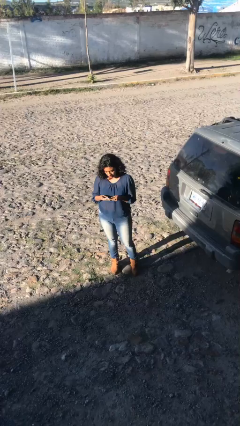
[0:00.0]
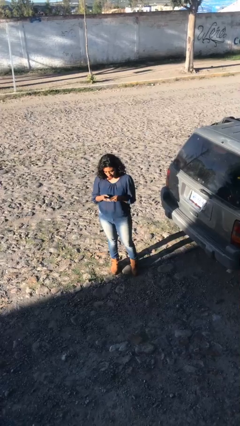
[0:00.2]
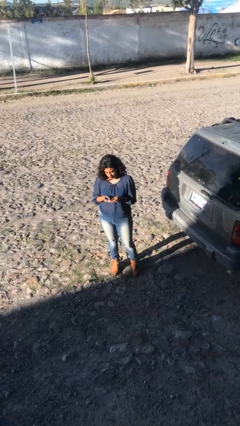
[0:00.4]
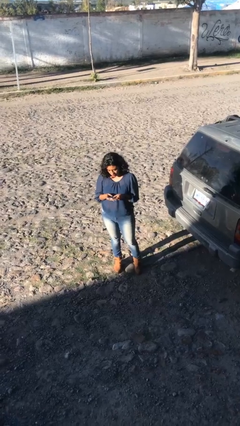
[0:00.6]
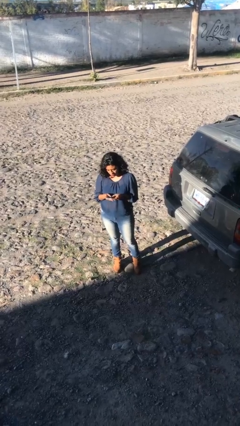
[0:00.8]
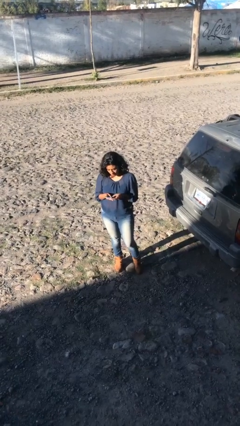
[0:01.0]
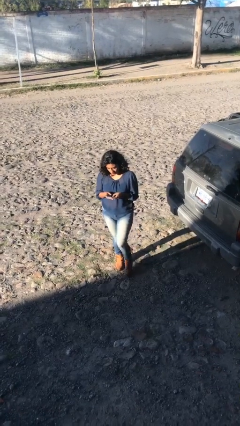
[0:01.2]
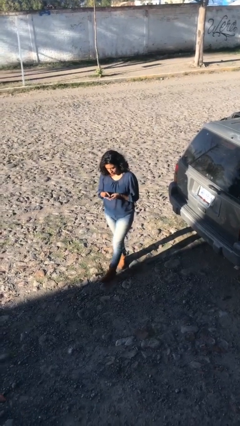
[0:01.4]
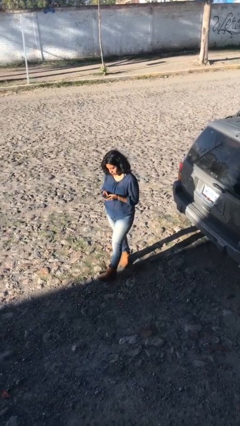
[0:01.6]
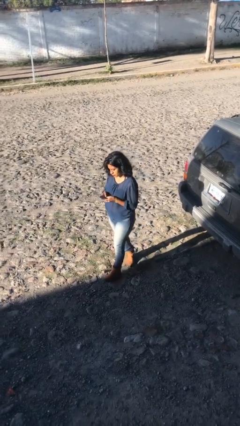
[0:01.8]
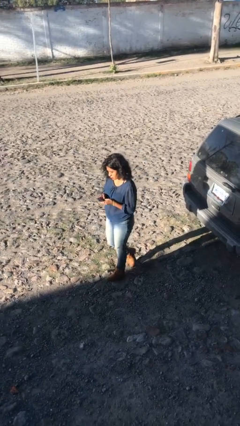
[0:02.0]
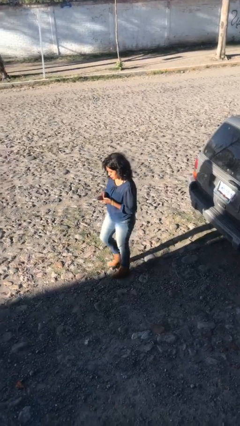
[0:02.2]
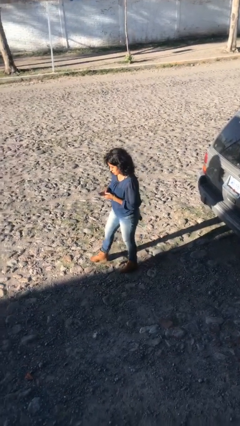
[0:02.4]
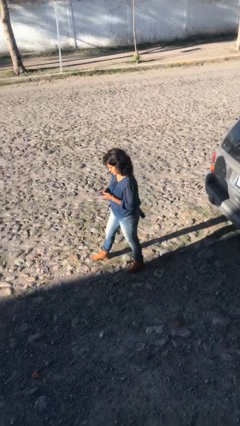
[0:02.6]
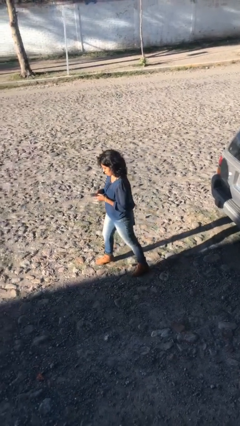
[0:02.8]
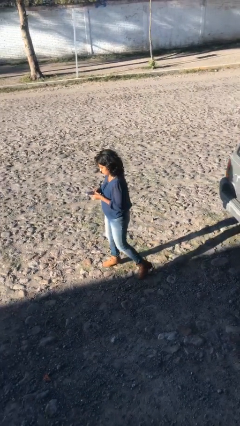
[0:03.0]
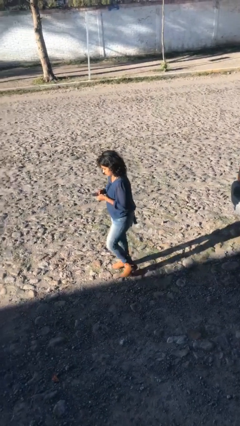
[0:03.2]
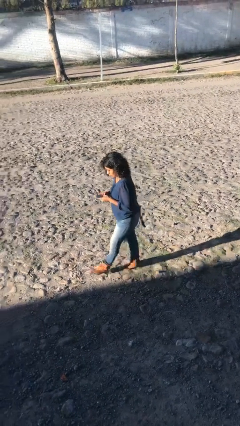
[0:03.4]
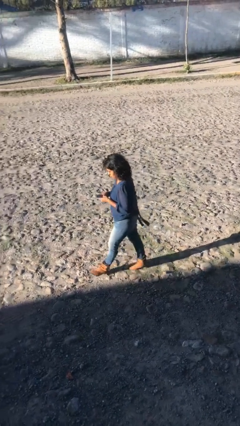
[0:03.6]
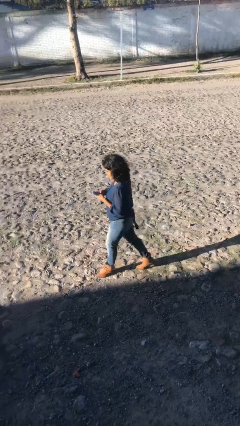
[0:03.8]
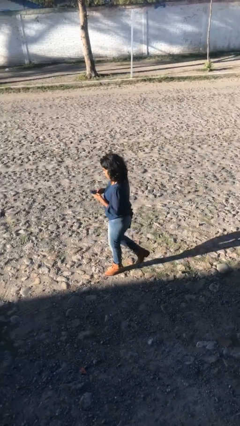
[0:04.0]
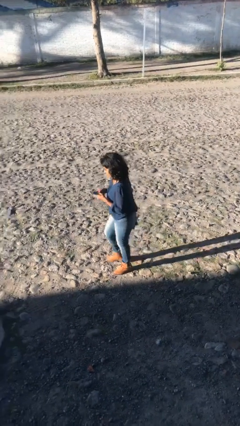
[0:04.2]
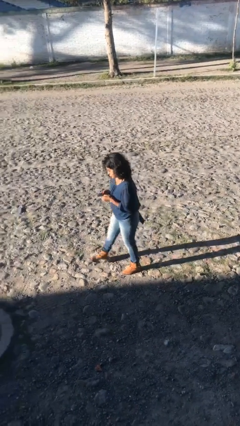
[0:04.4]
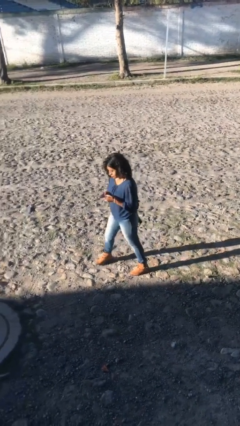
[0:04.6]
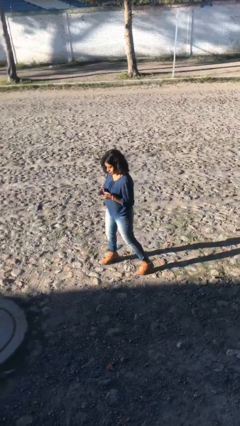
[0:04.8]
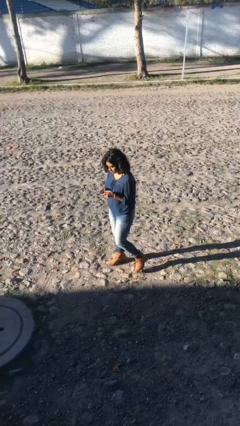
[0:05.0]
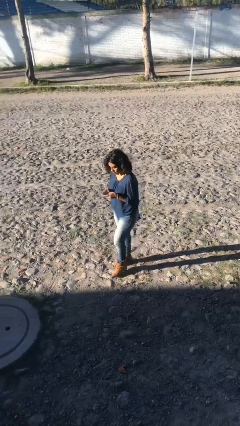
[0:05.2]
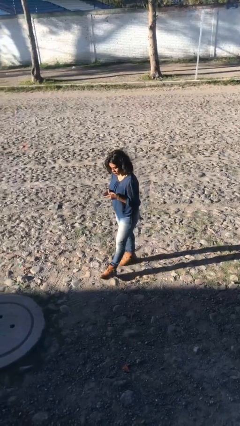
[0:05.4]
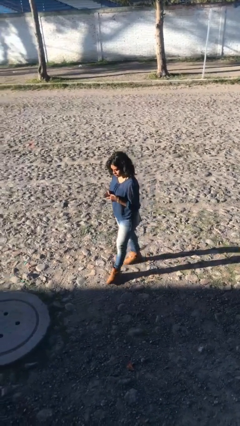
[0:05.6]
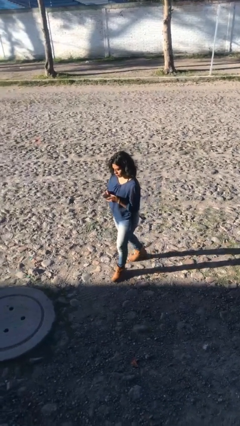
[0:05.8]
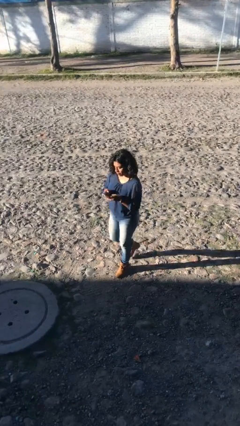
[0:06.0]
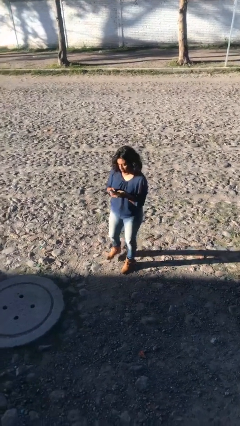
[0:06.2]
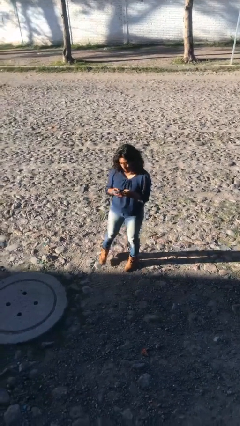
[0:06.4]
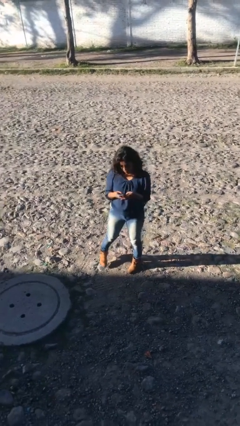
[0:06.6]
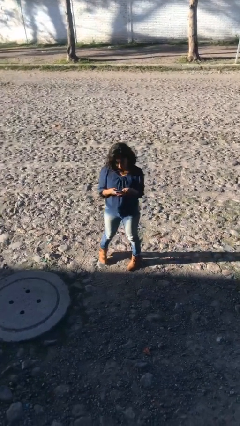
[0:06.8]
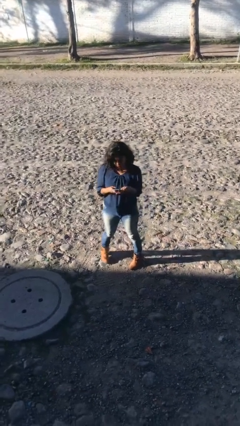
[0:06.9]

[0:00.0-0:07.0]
person texts on phone

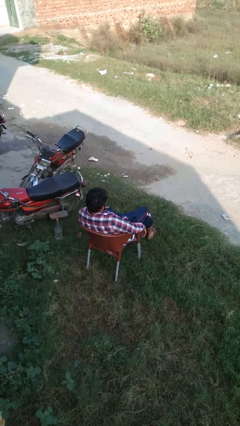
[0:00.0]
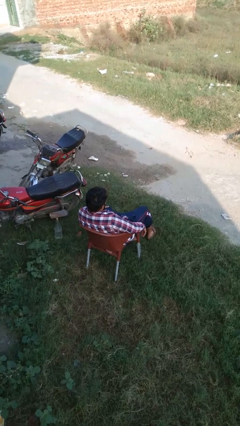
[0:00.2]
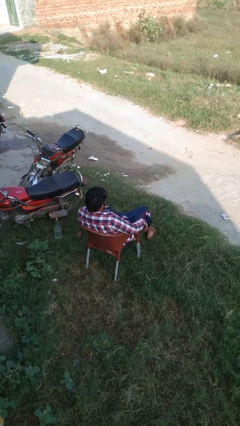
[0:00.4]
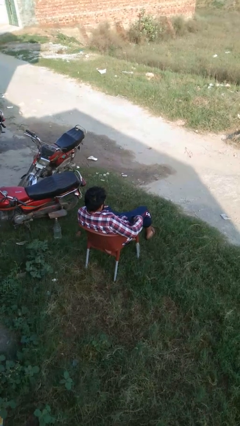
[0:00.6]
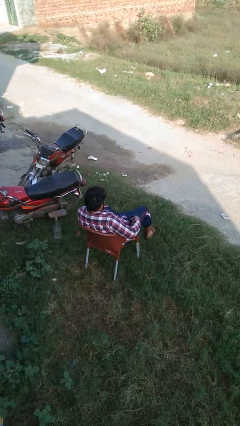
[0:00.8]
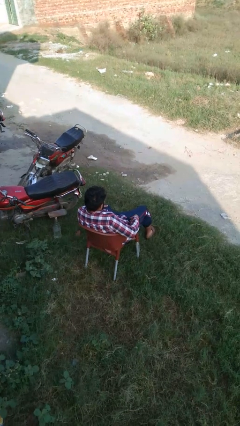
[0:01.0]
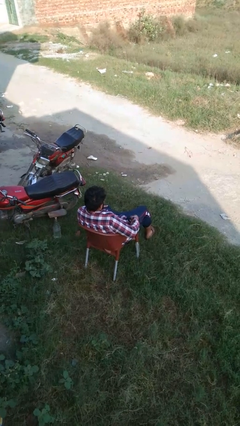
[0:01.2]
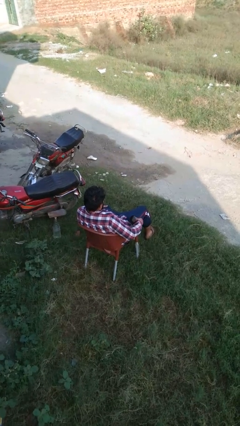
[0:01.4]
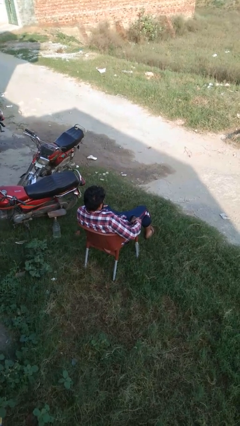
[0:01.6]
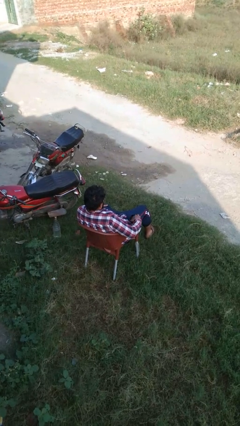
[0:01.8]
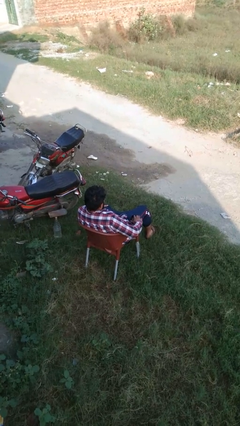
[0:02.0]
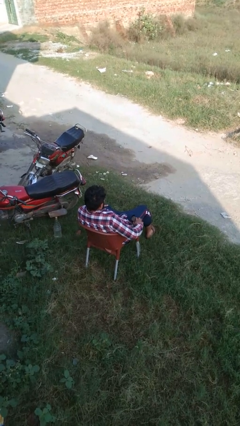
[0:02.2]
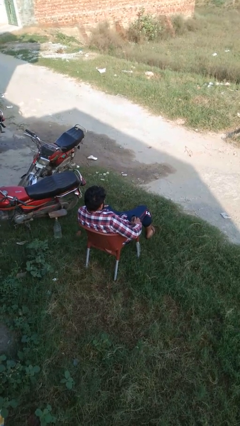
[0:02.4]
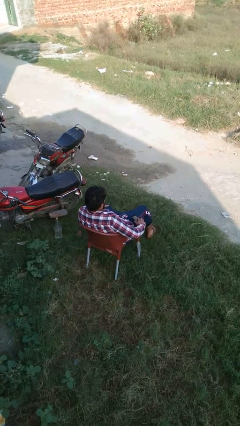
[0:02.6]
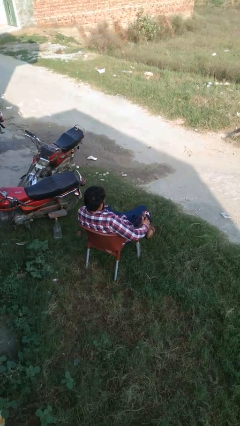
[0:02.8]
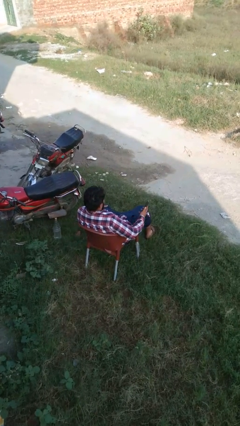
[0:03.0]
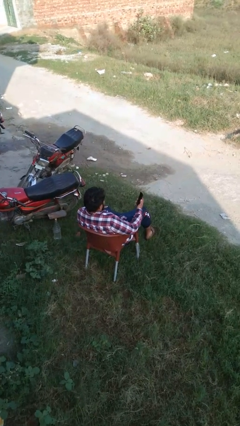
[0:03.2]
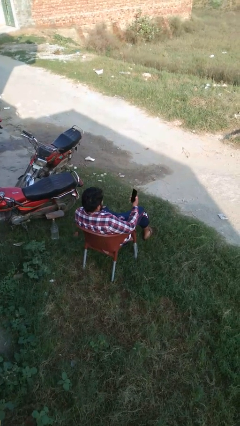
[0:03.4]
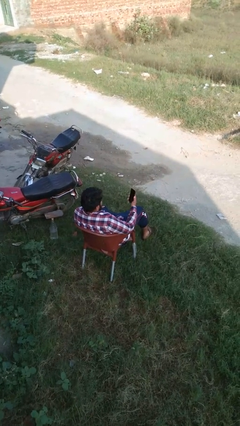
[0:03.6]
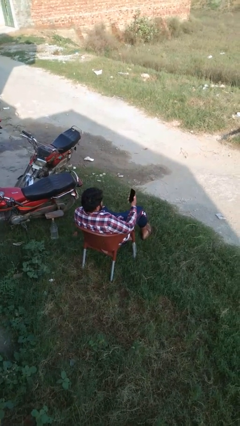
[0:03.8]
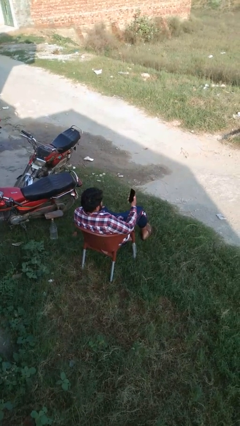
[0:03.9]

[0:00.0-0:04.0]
person takes phone from pocket

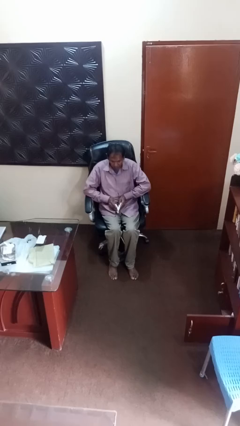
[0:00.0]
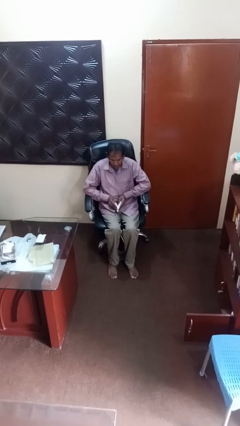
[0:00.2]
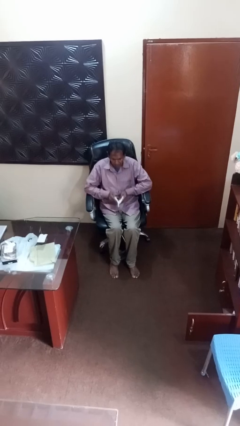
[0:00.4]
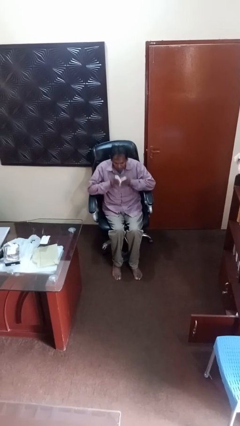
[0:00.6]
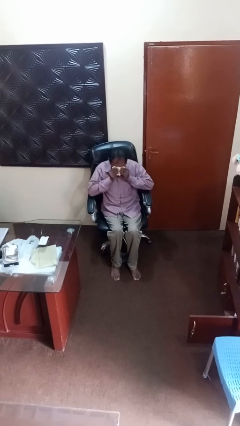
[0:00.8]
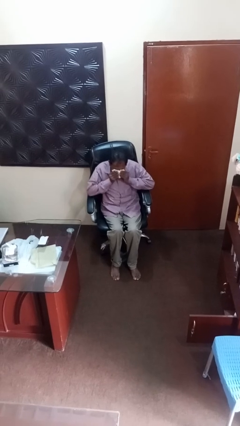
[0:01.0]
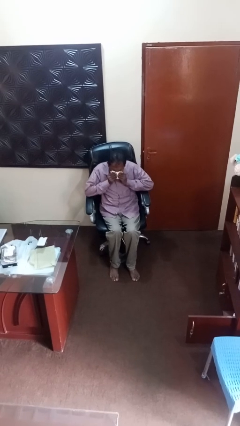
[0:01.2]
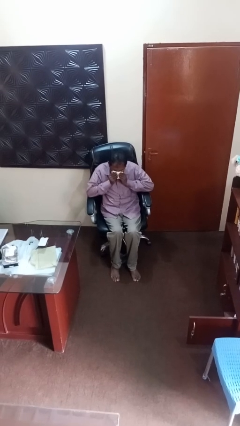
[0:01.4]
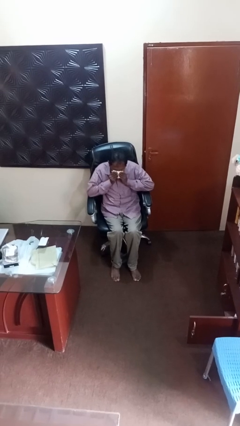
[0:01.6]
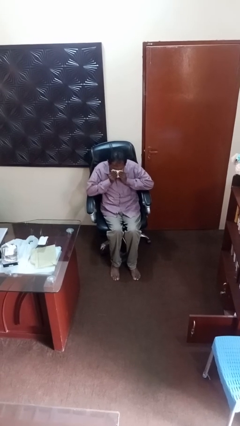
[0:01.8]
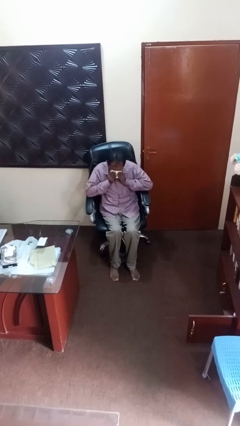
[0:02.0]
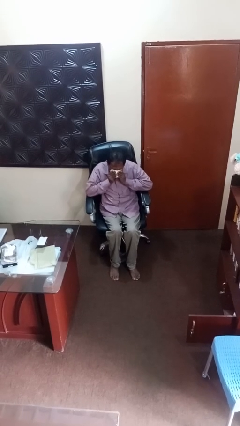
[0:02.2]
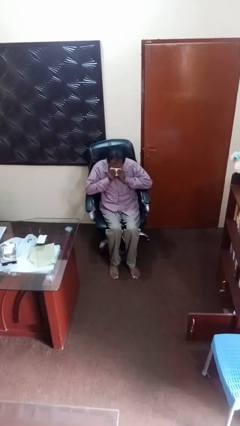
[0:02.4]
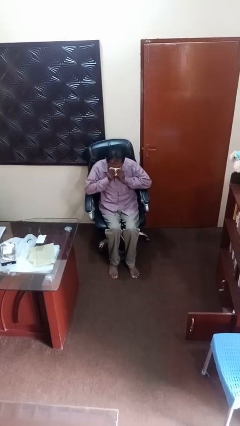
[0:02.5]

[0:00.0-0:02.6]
person blows nose

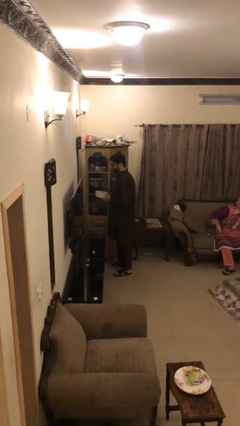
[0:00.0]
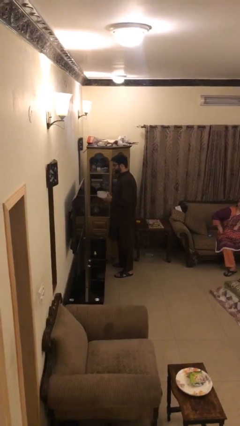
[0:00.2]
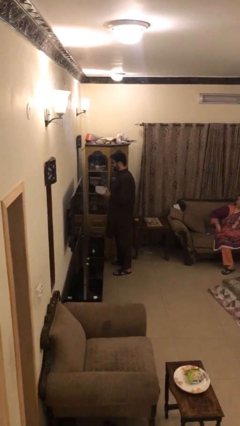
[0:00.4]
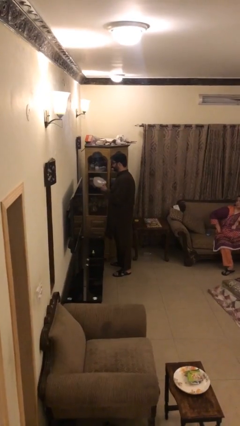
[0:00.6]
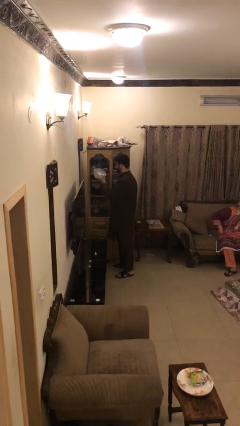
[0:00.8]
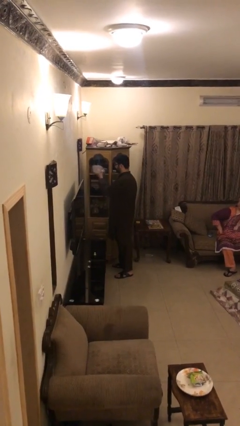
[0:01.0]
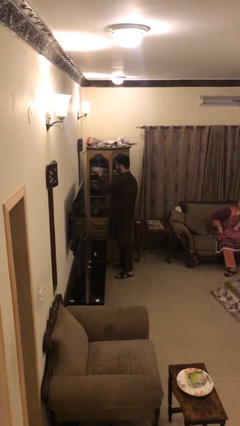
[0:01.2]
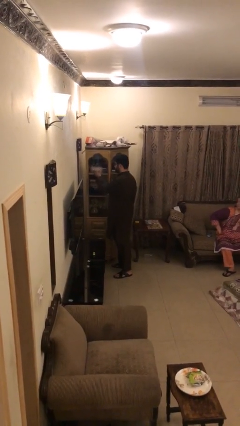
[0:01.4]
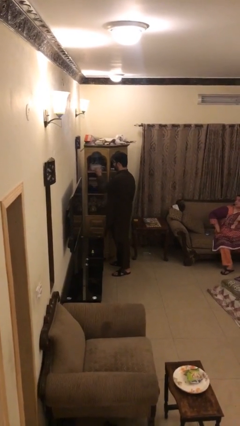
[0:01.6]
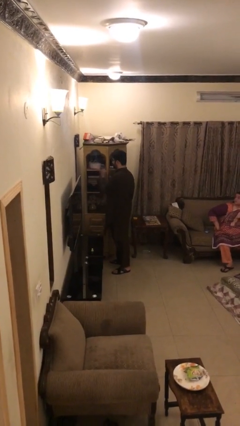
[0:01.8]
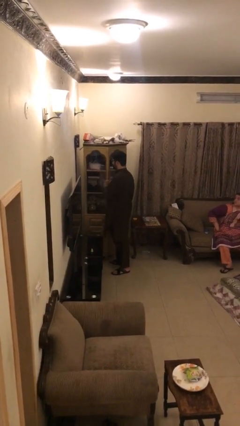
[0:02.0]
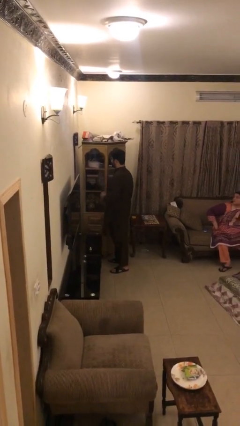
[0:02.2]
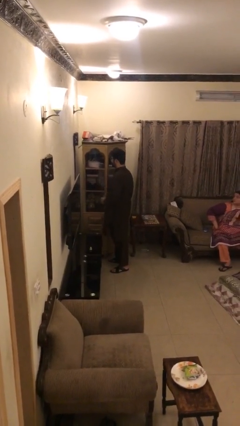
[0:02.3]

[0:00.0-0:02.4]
person puts down object on shelf

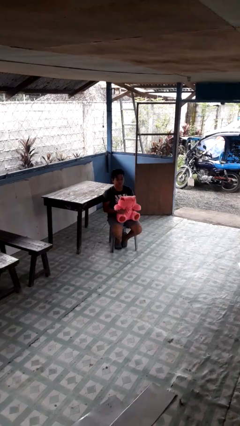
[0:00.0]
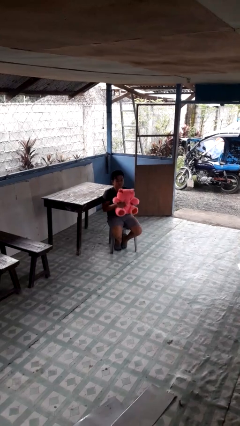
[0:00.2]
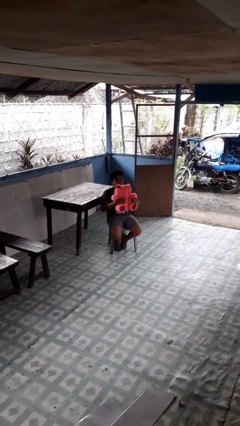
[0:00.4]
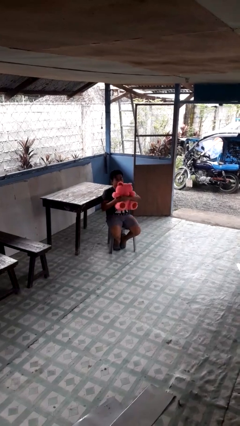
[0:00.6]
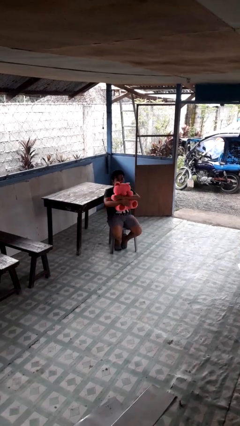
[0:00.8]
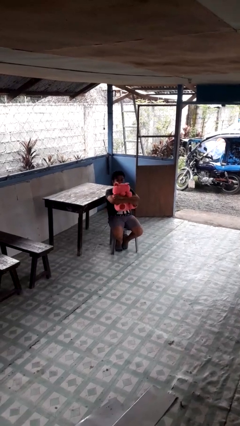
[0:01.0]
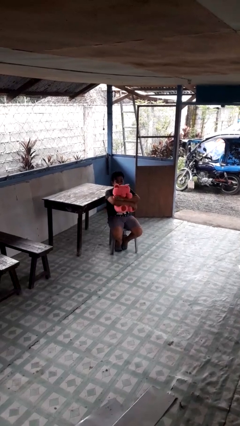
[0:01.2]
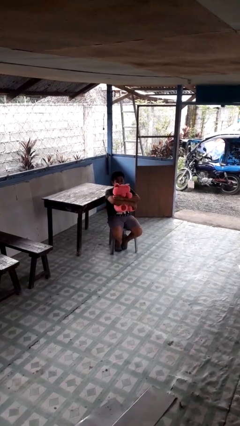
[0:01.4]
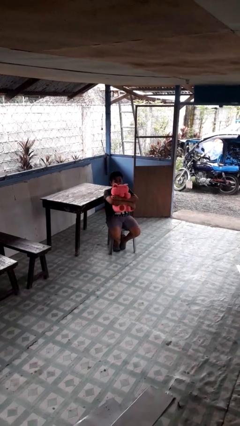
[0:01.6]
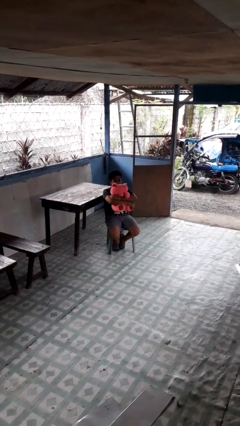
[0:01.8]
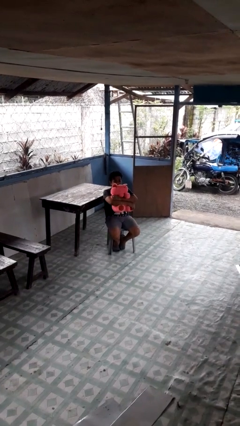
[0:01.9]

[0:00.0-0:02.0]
person hugs stuffed animal
